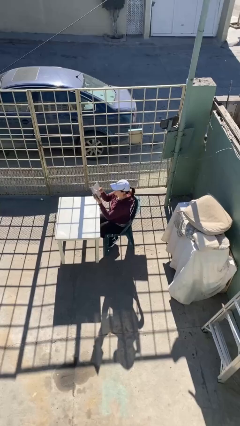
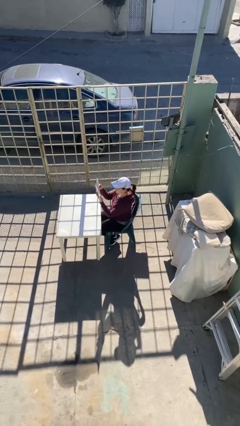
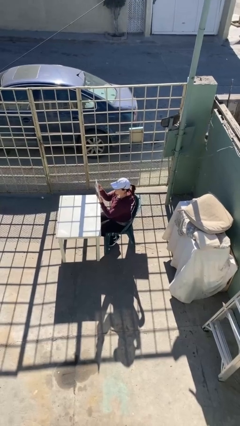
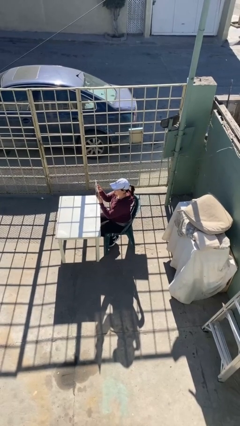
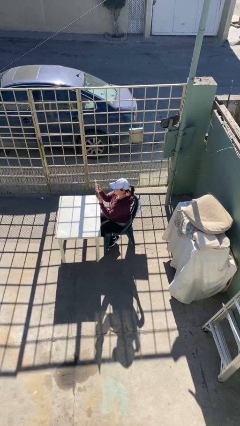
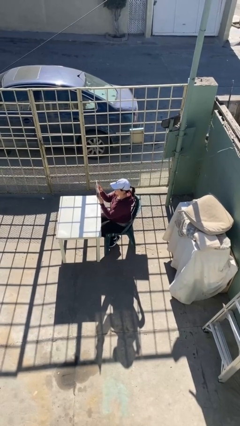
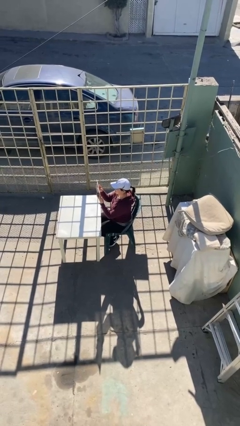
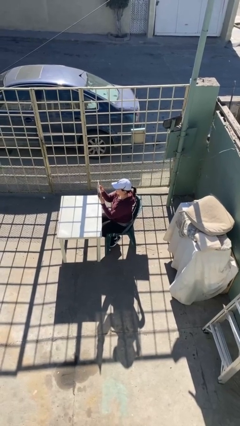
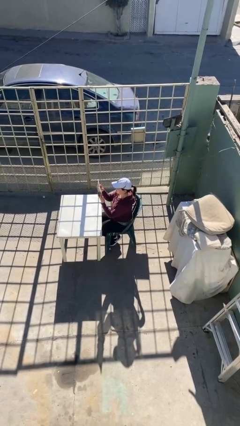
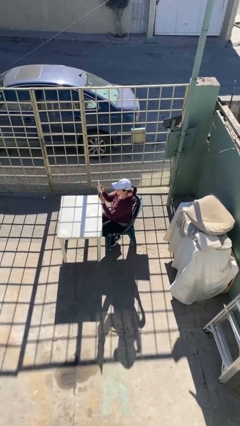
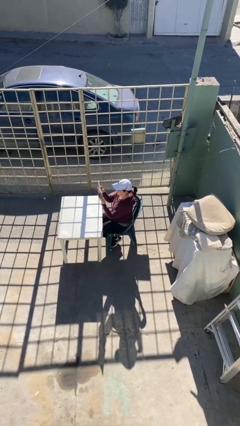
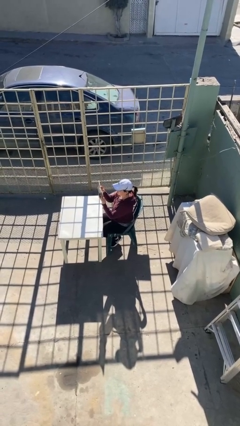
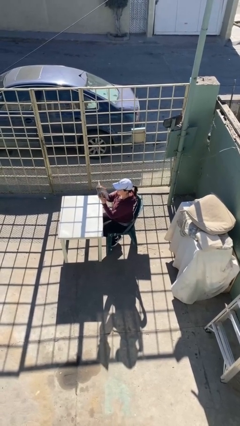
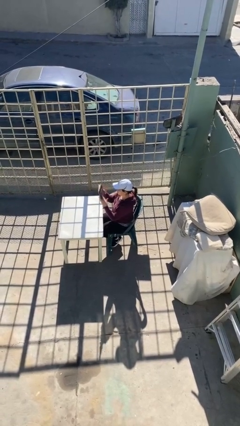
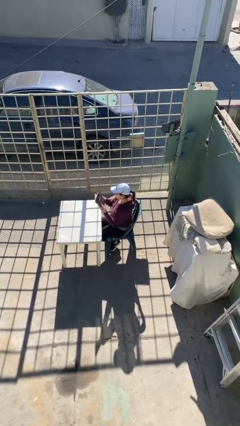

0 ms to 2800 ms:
person reads document

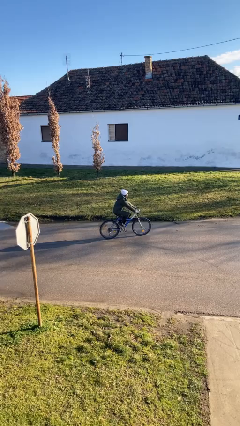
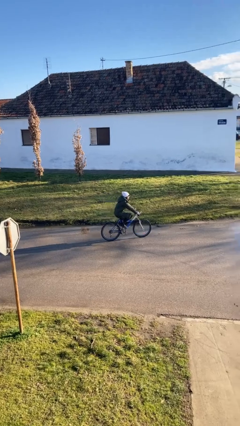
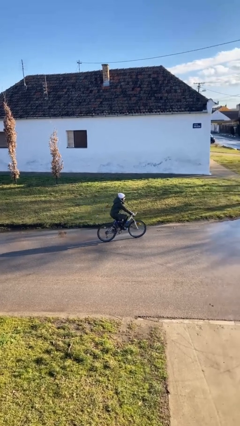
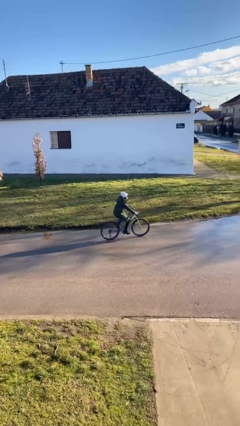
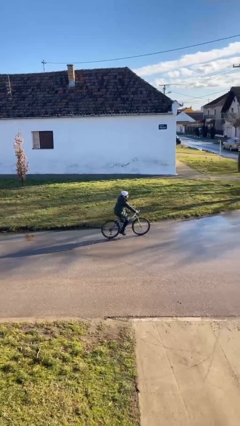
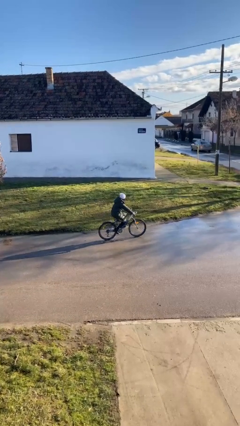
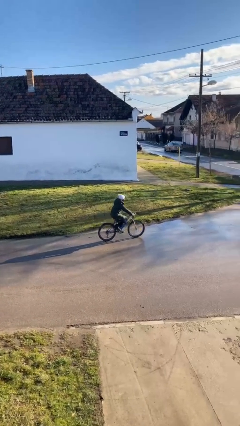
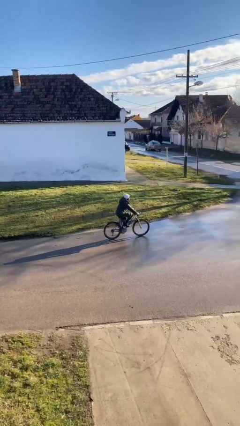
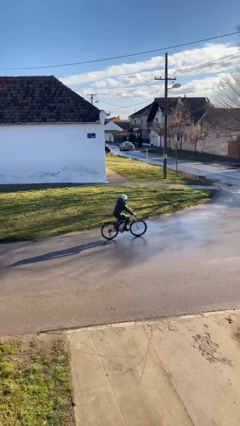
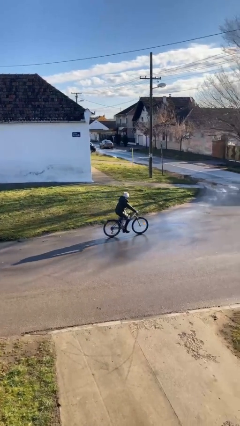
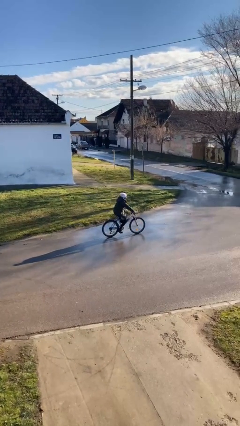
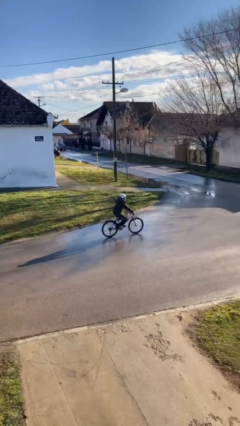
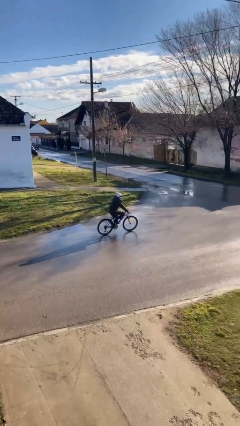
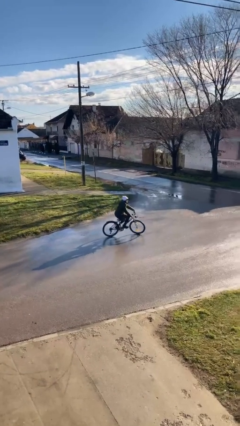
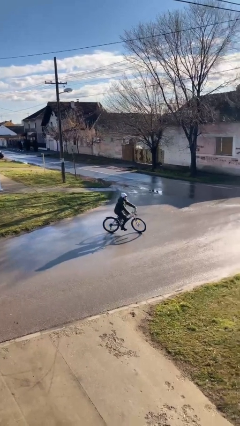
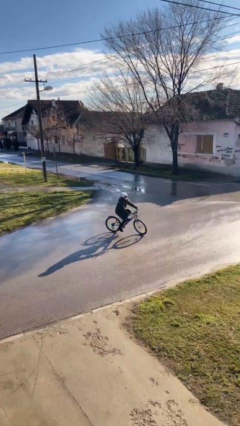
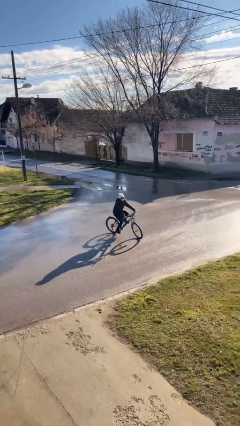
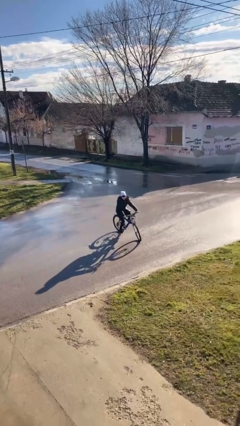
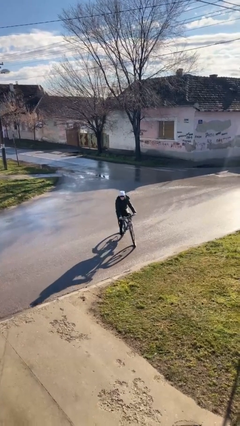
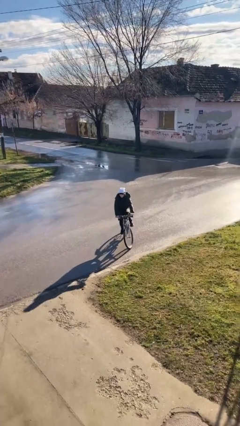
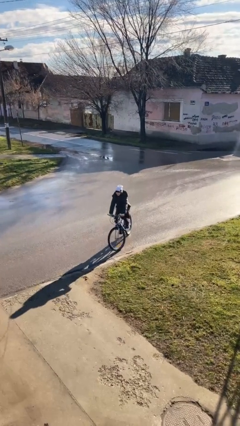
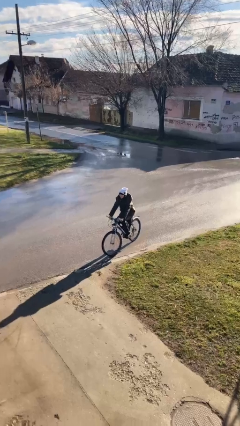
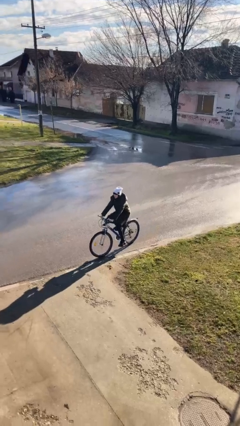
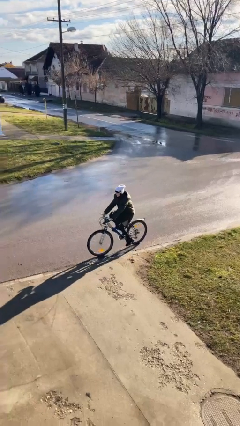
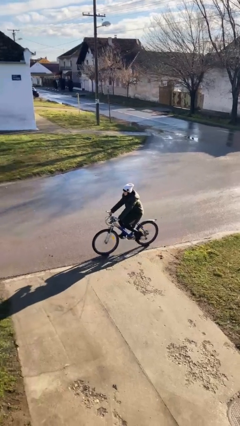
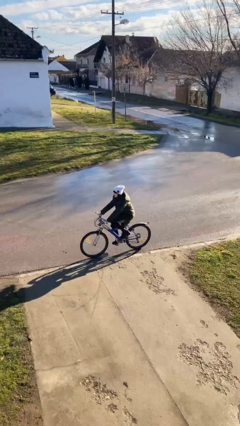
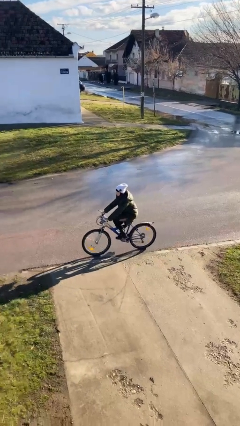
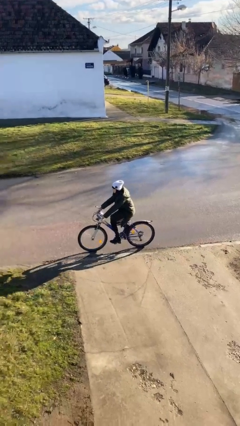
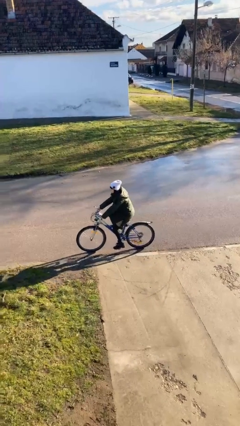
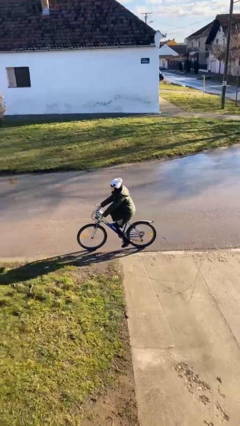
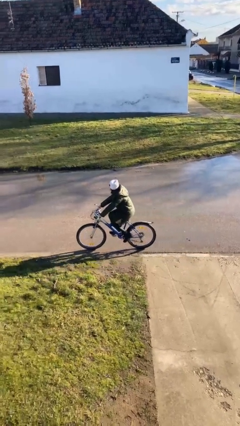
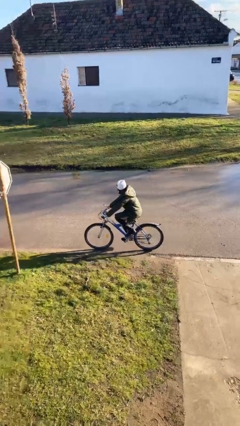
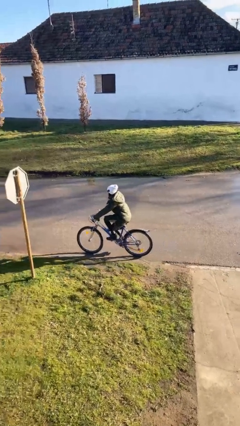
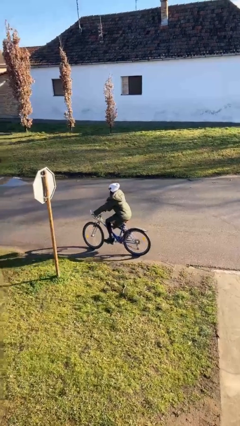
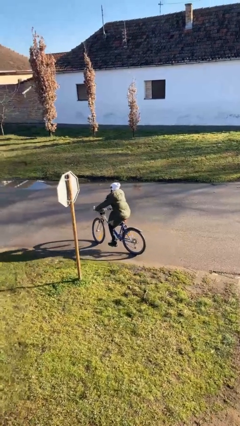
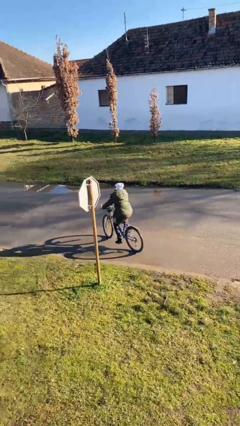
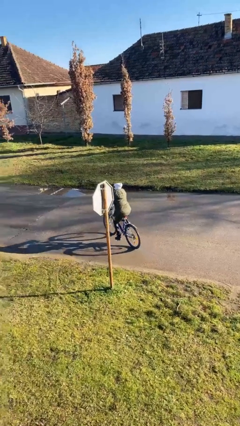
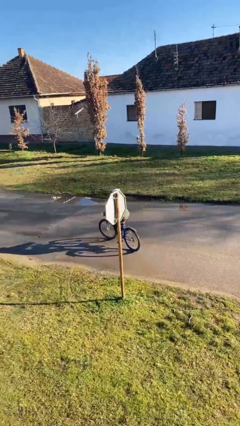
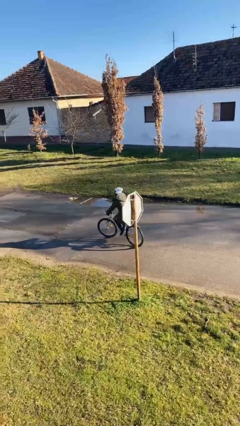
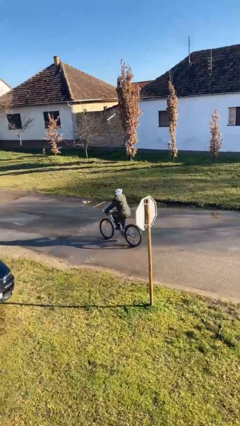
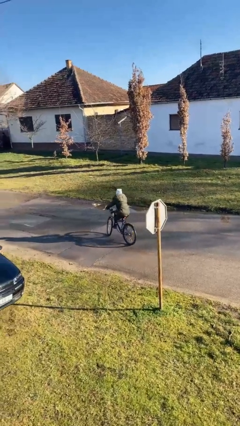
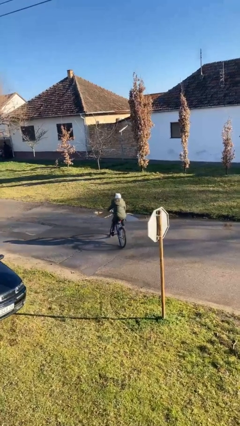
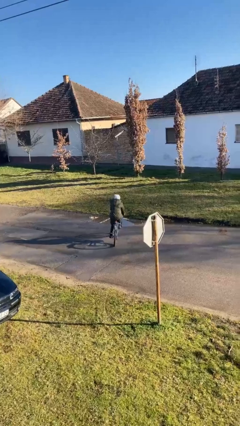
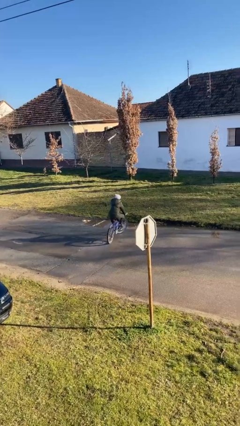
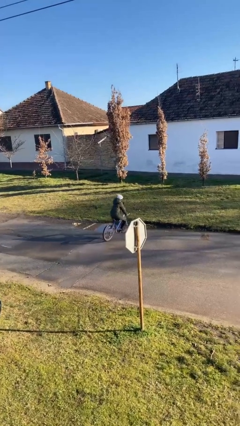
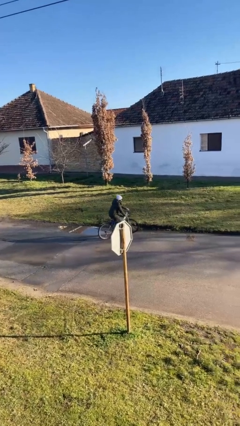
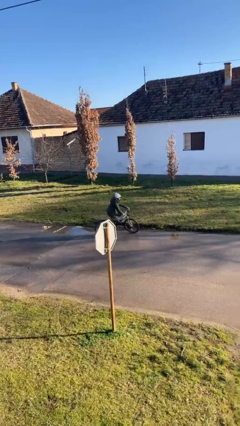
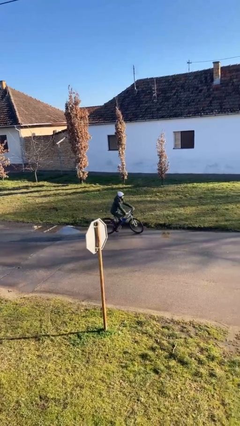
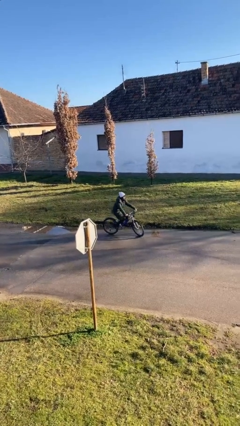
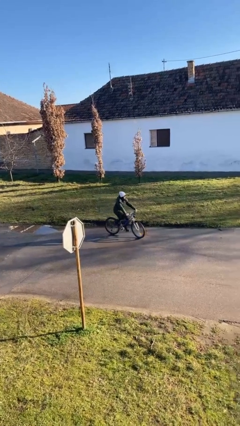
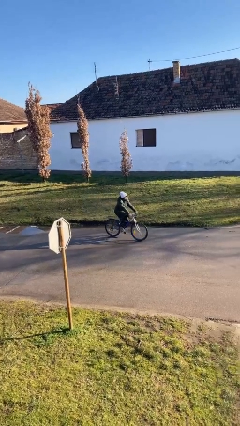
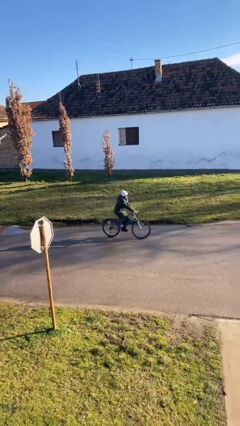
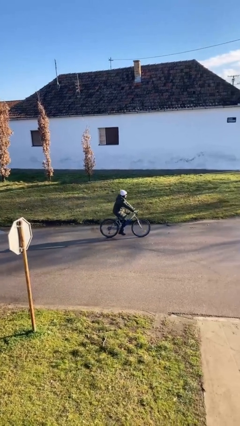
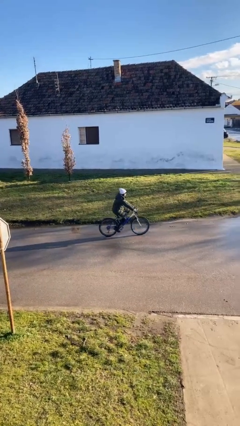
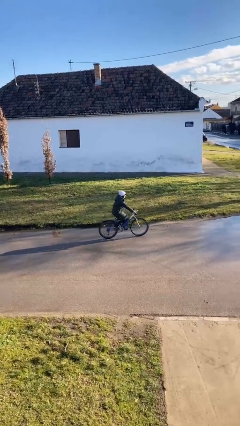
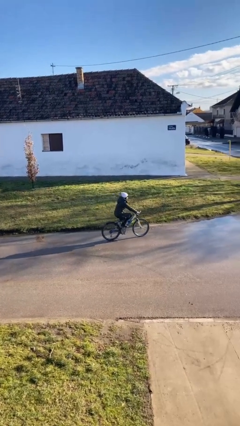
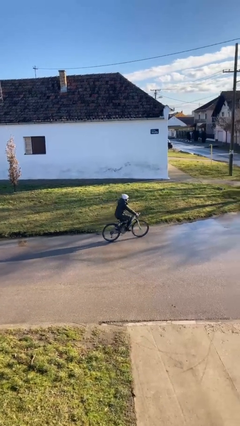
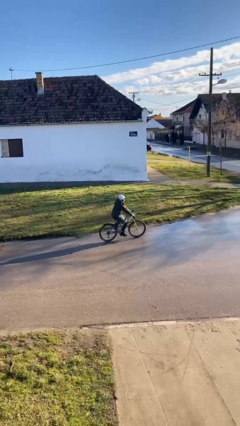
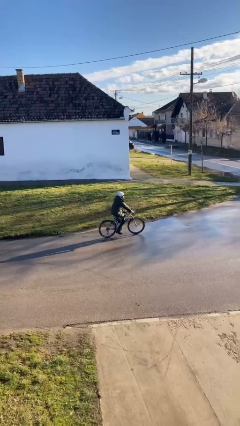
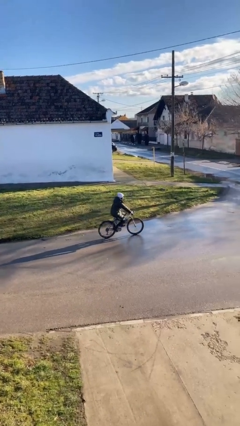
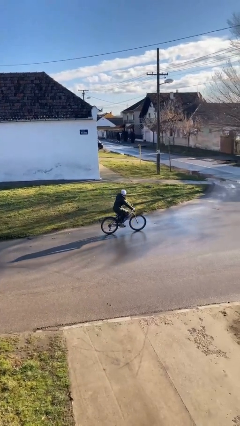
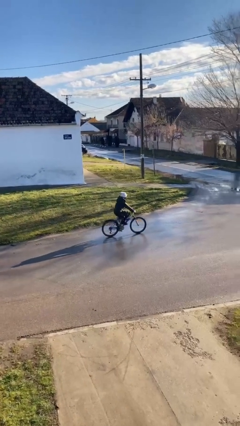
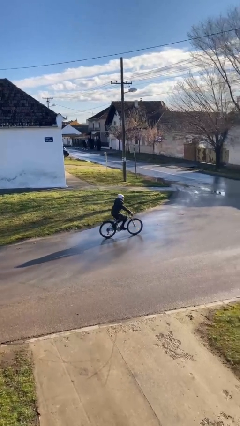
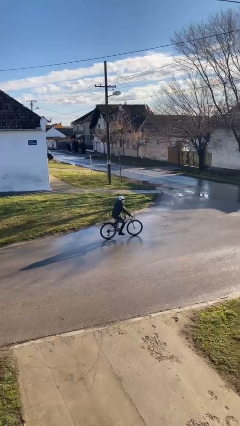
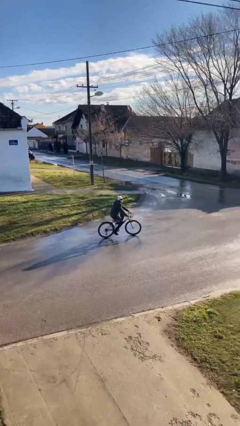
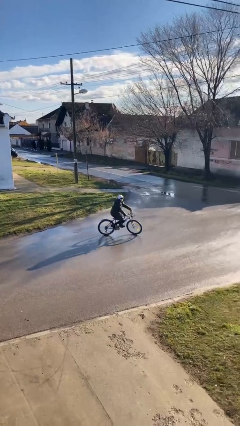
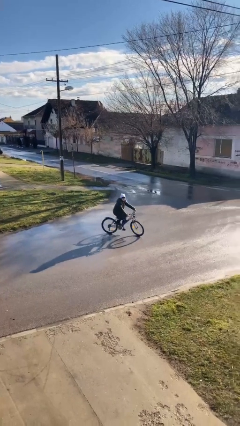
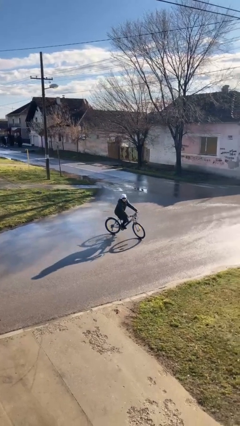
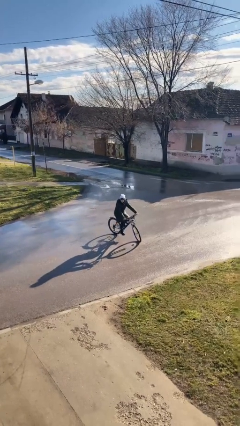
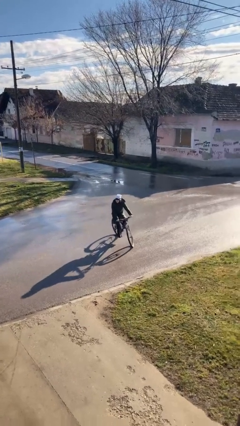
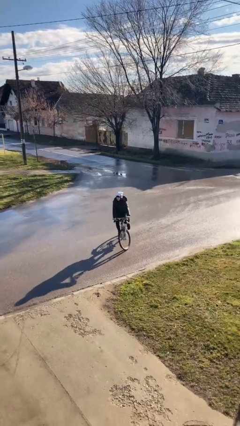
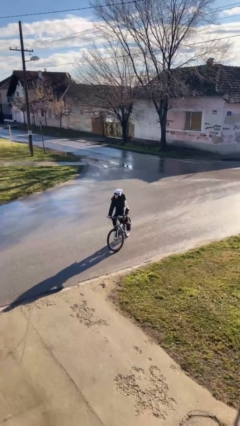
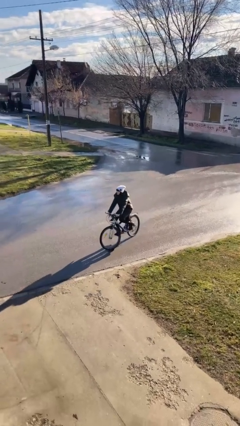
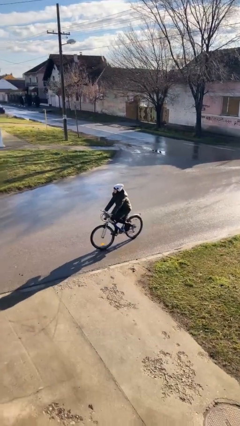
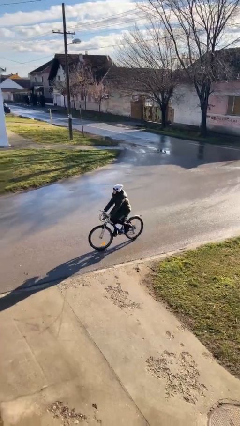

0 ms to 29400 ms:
person rides bicycle

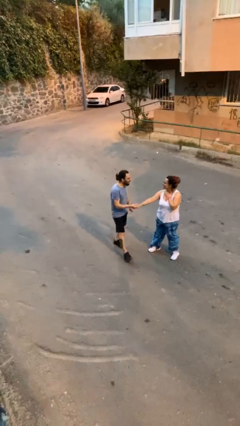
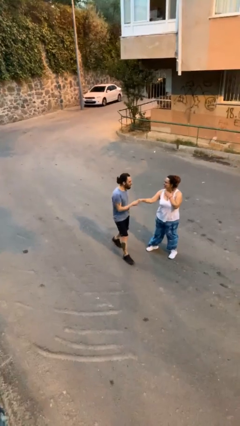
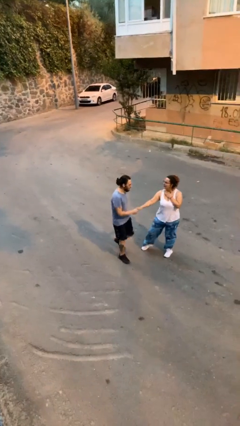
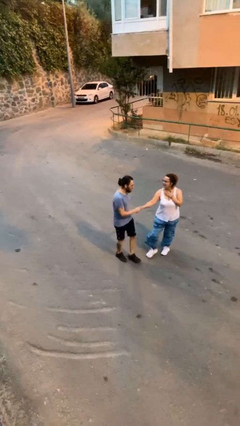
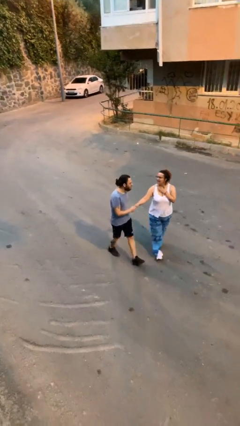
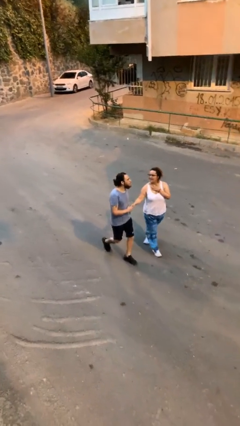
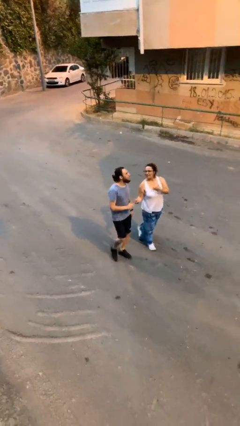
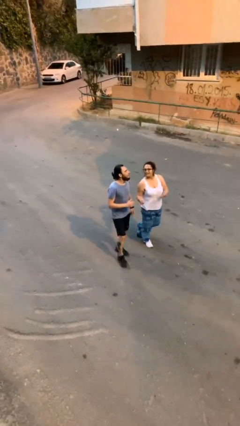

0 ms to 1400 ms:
person shakes hand
